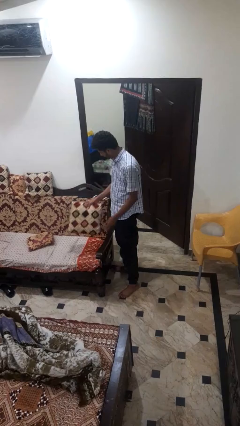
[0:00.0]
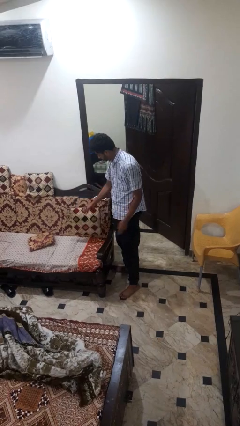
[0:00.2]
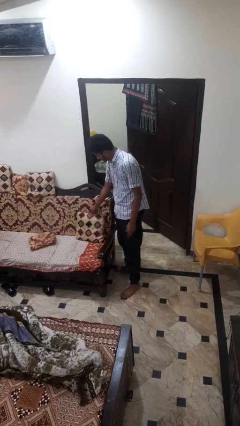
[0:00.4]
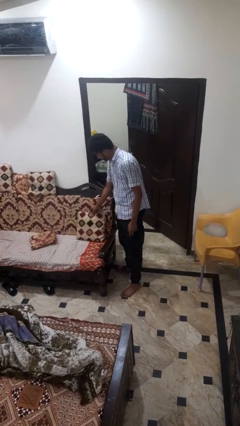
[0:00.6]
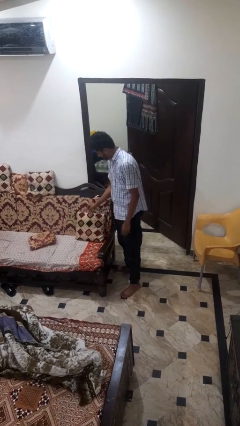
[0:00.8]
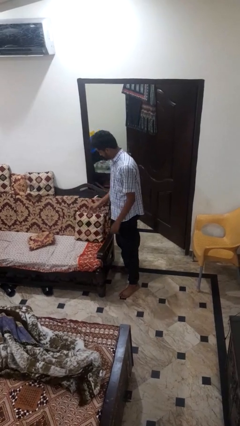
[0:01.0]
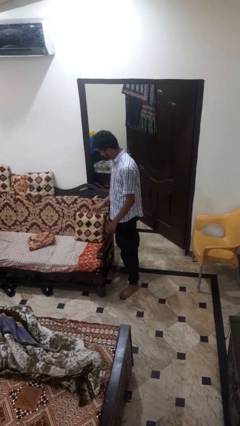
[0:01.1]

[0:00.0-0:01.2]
person puts down object on couch

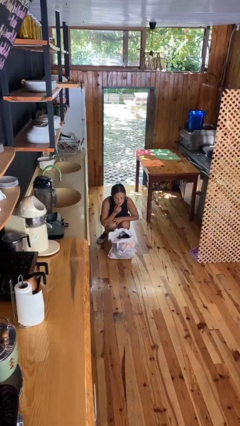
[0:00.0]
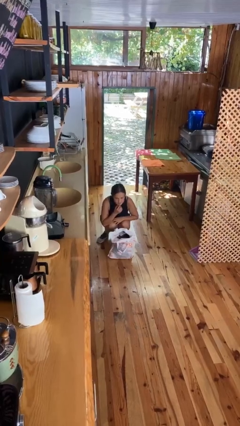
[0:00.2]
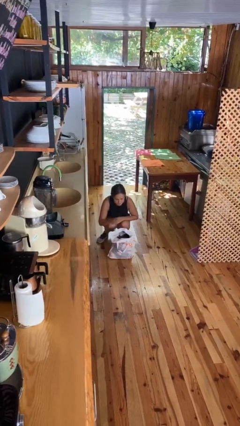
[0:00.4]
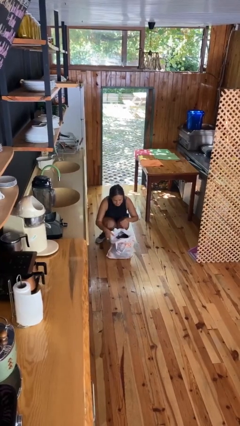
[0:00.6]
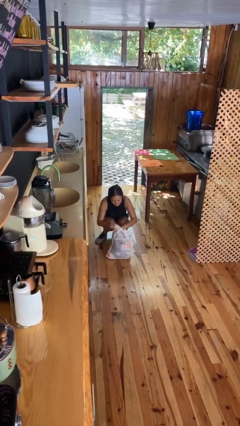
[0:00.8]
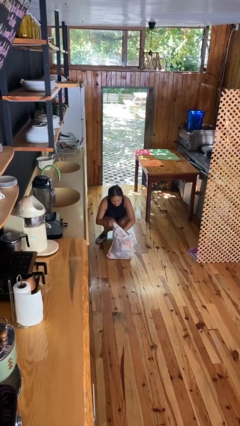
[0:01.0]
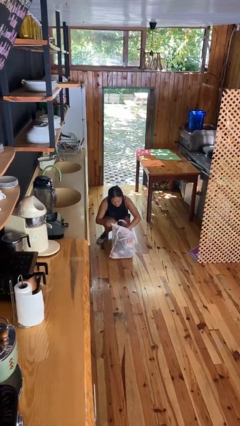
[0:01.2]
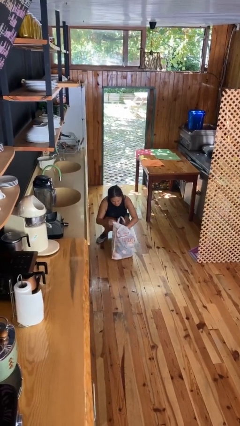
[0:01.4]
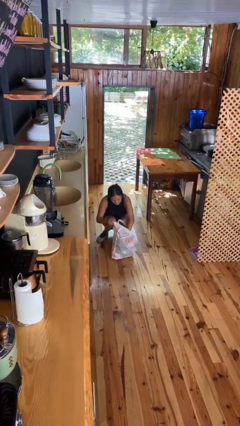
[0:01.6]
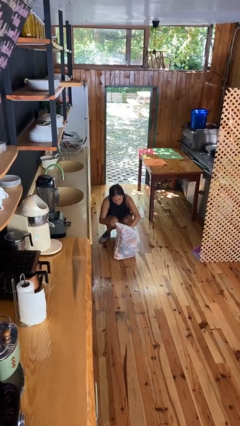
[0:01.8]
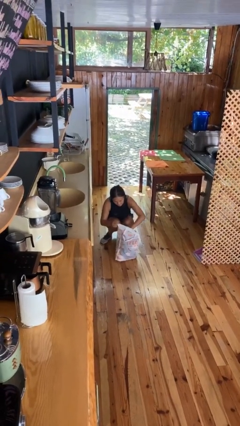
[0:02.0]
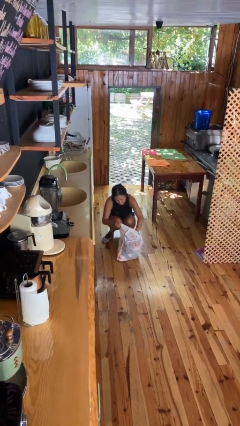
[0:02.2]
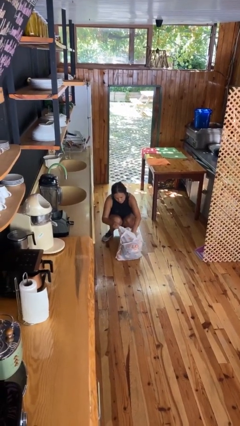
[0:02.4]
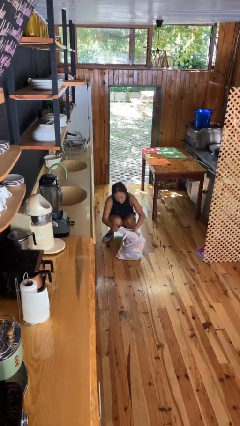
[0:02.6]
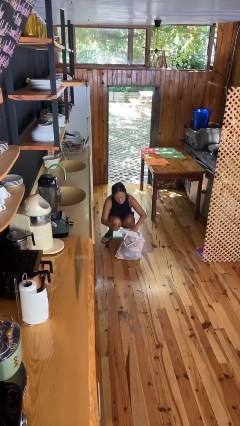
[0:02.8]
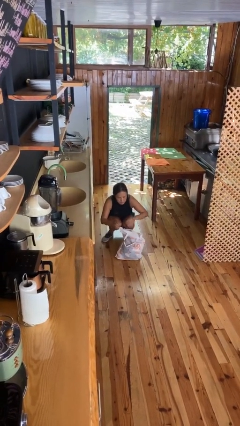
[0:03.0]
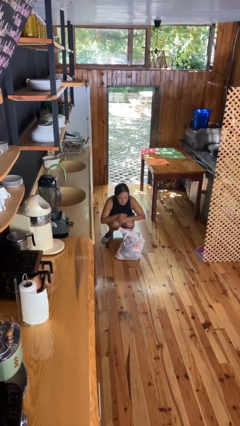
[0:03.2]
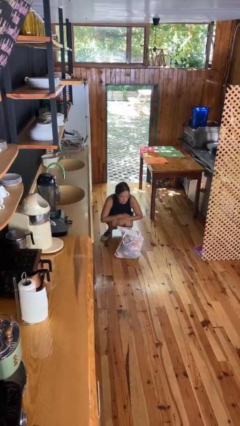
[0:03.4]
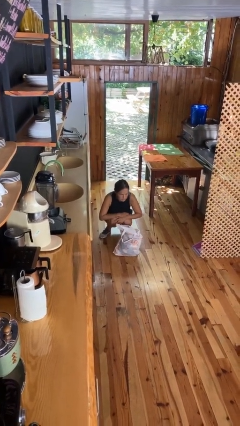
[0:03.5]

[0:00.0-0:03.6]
person searches in bag

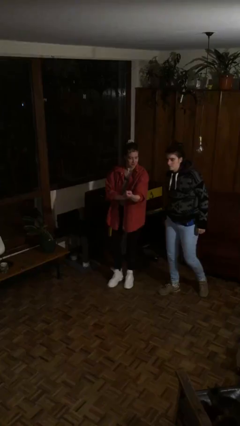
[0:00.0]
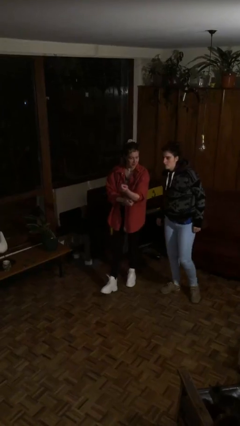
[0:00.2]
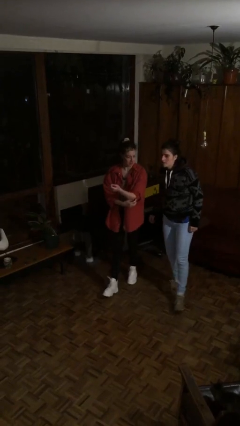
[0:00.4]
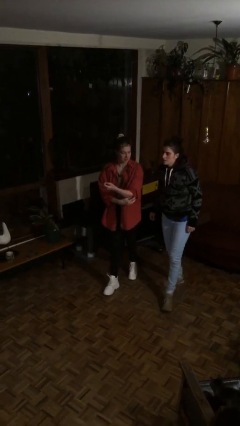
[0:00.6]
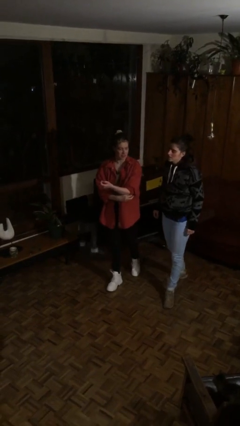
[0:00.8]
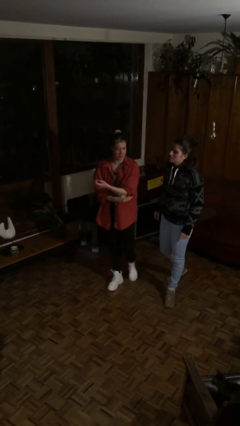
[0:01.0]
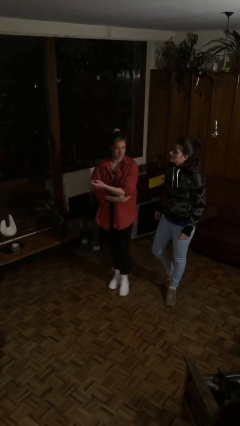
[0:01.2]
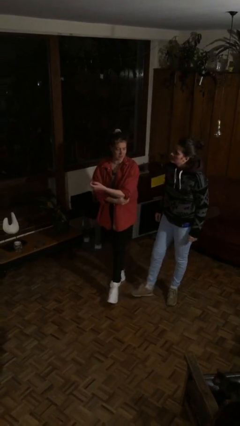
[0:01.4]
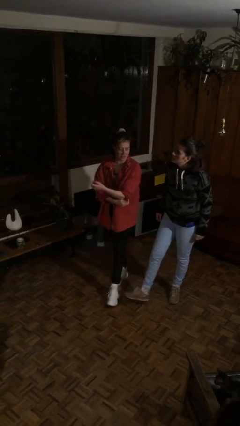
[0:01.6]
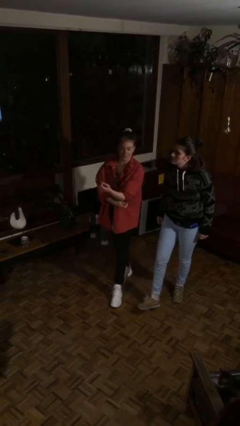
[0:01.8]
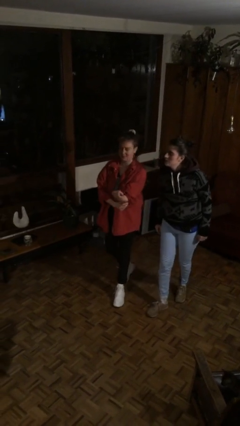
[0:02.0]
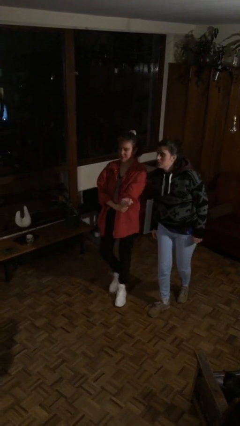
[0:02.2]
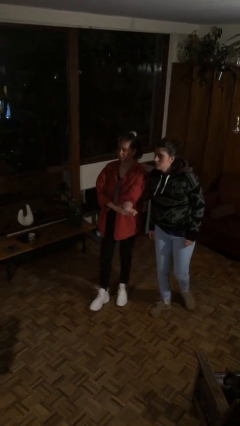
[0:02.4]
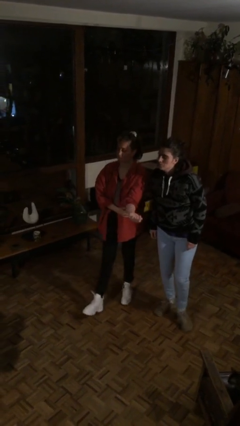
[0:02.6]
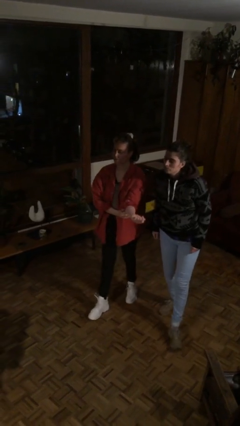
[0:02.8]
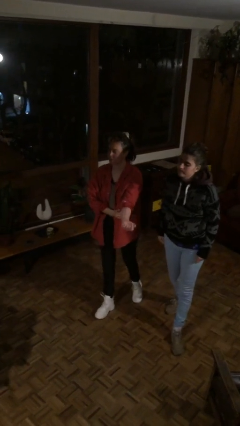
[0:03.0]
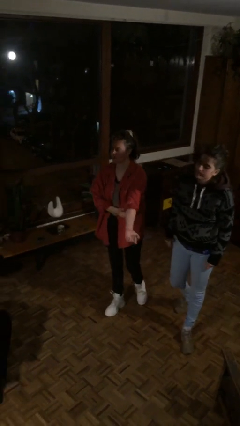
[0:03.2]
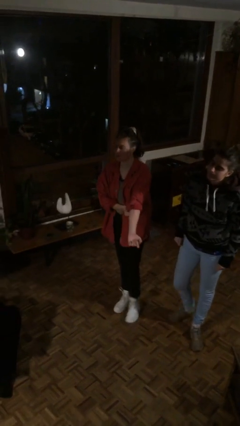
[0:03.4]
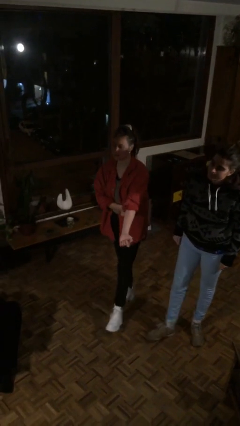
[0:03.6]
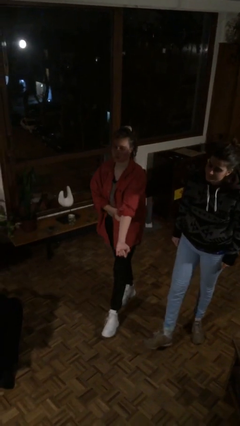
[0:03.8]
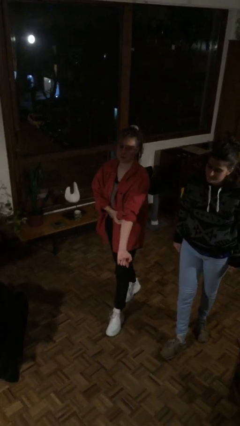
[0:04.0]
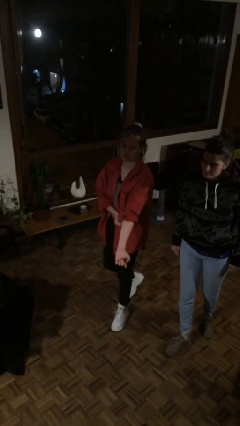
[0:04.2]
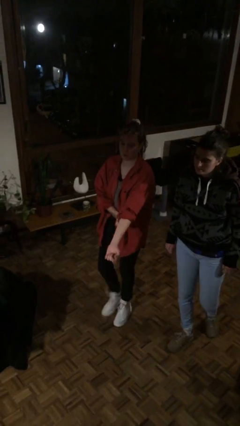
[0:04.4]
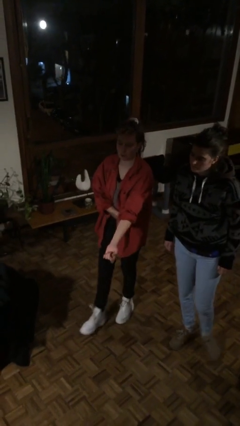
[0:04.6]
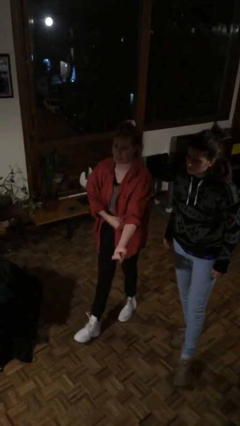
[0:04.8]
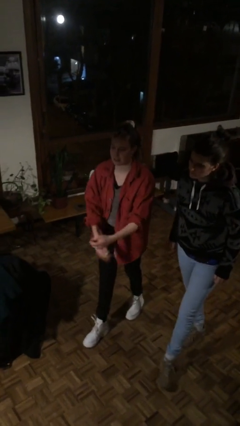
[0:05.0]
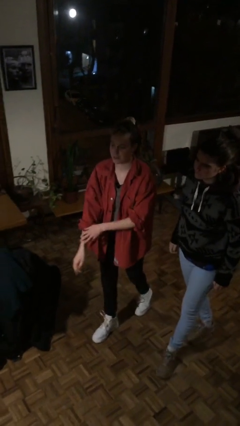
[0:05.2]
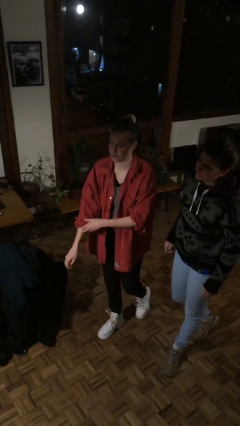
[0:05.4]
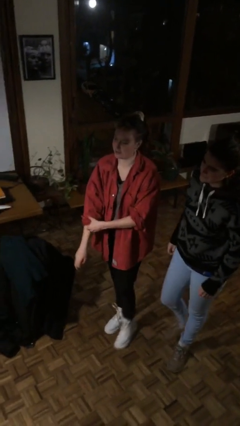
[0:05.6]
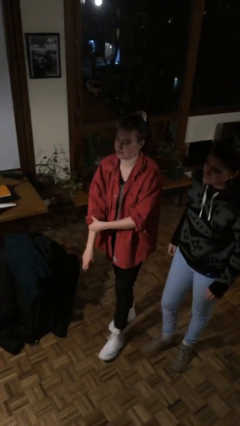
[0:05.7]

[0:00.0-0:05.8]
person talks to person

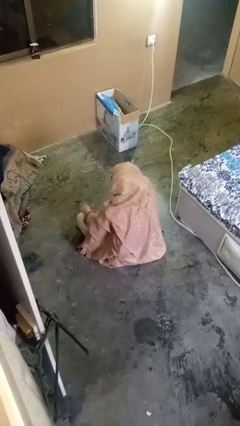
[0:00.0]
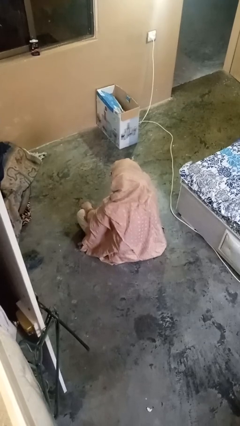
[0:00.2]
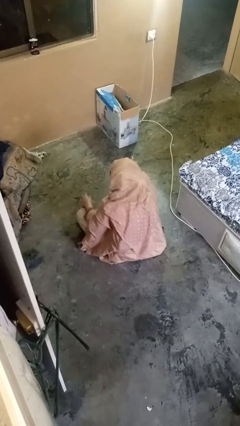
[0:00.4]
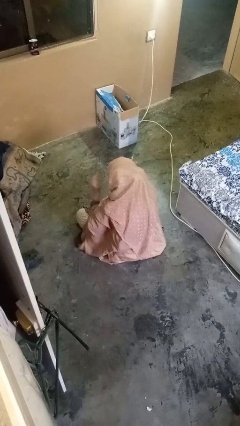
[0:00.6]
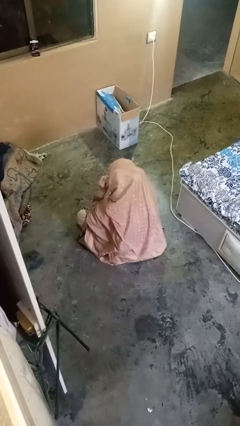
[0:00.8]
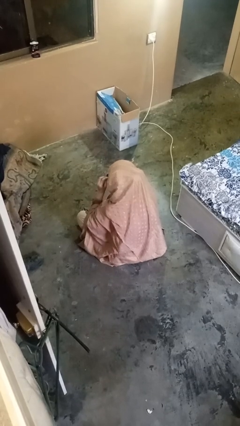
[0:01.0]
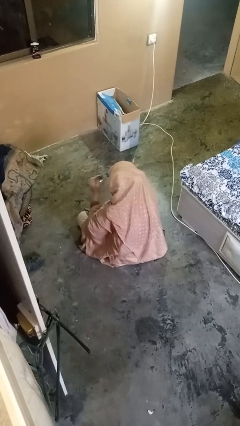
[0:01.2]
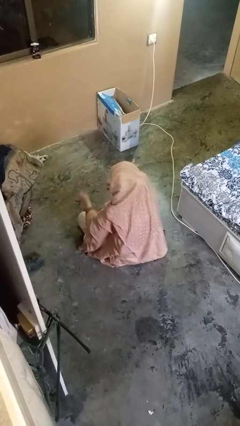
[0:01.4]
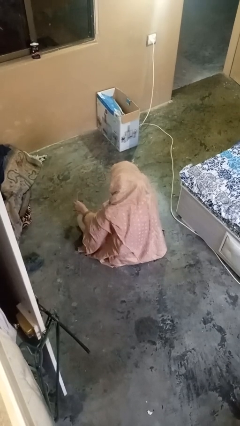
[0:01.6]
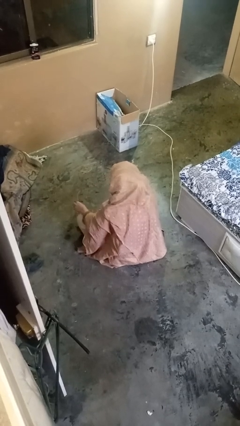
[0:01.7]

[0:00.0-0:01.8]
person takes off glasses

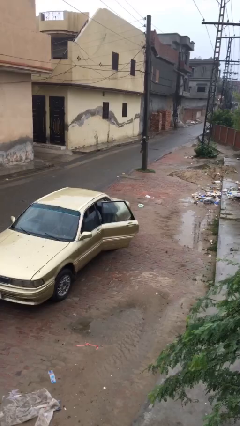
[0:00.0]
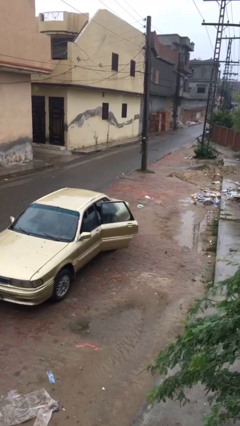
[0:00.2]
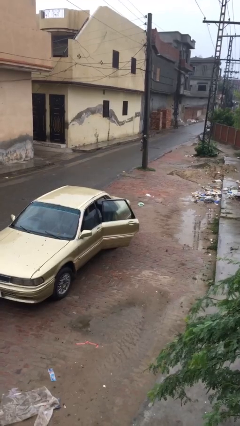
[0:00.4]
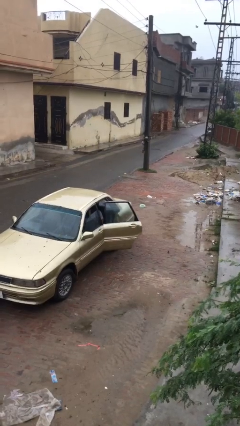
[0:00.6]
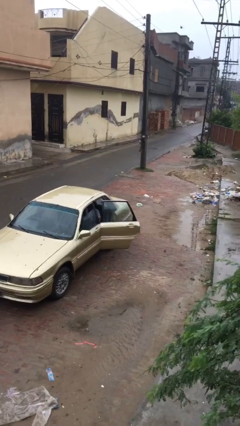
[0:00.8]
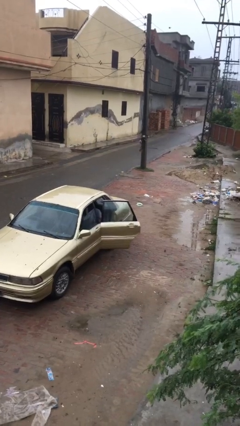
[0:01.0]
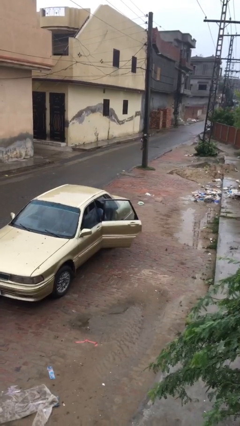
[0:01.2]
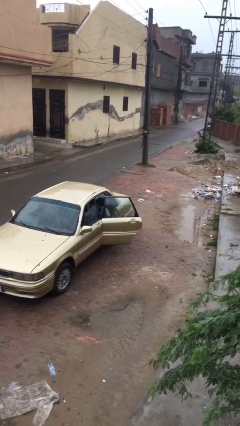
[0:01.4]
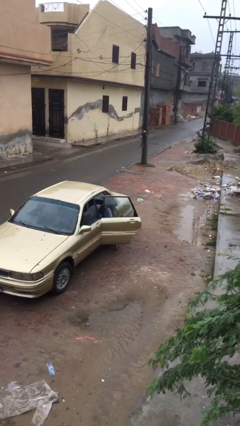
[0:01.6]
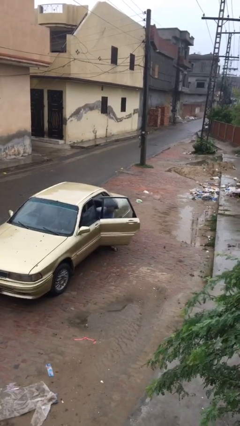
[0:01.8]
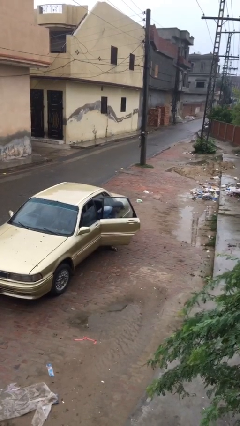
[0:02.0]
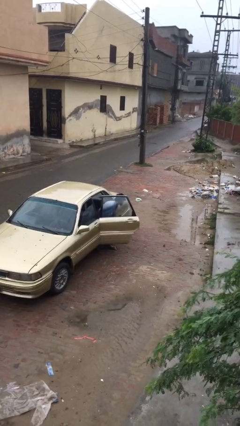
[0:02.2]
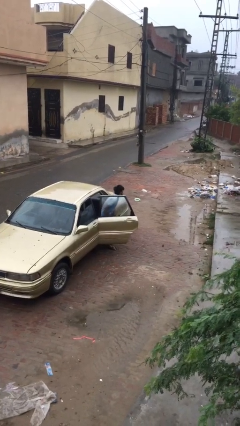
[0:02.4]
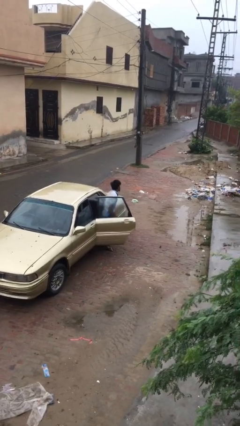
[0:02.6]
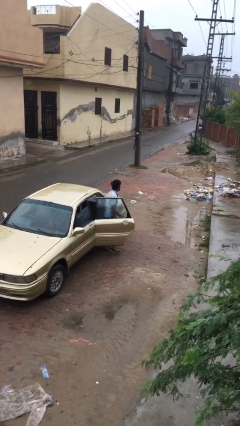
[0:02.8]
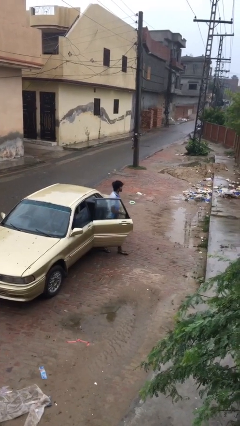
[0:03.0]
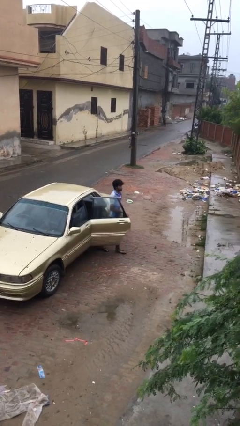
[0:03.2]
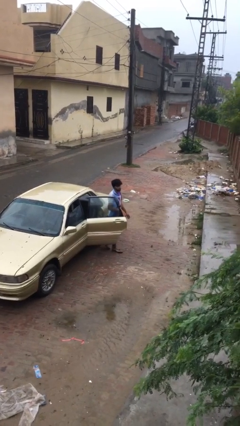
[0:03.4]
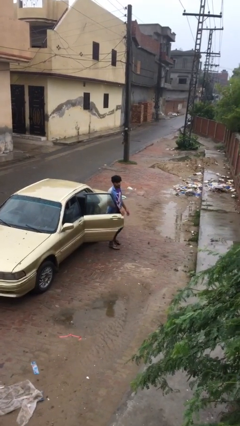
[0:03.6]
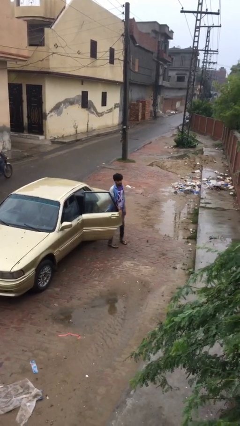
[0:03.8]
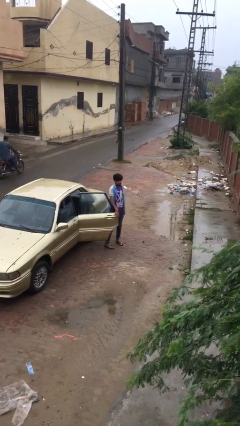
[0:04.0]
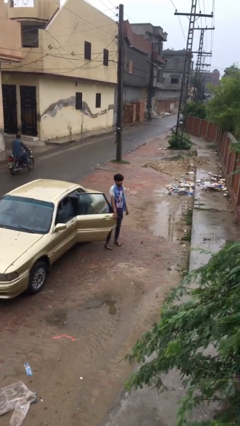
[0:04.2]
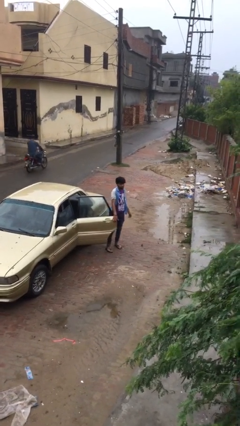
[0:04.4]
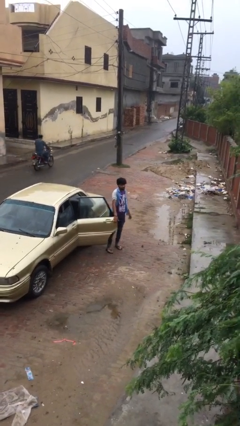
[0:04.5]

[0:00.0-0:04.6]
person exits car

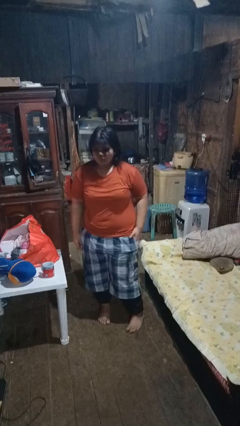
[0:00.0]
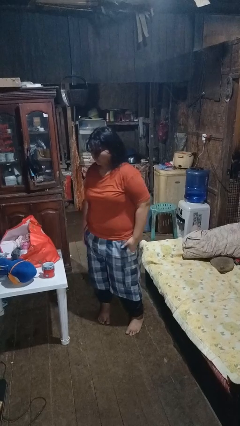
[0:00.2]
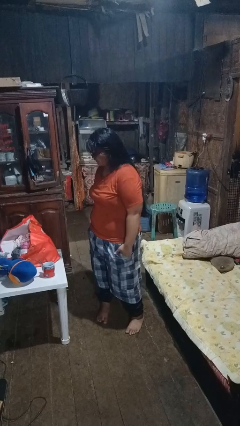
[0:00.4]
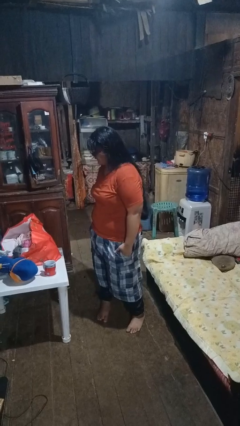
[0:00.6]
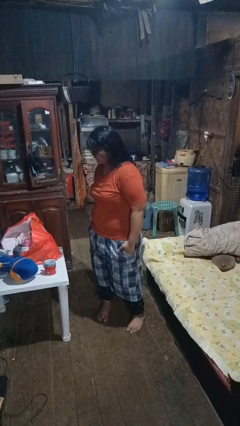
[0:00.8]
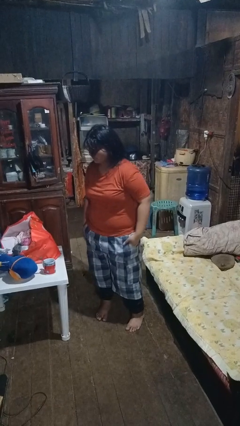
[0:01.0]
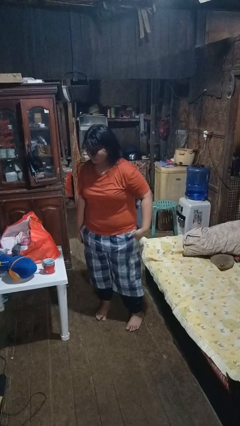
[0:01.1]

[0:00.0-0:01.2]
person puts hands in back pockets
